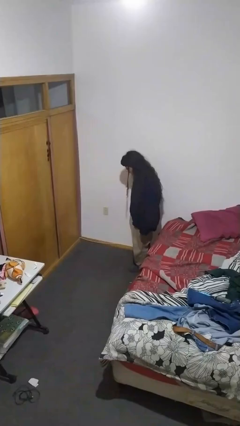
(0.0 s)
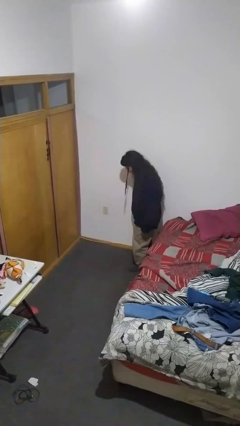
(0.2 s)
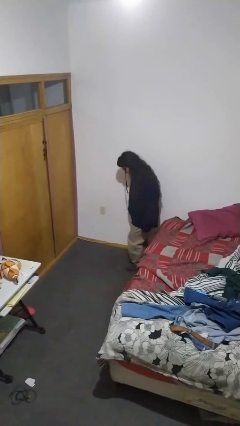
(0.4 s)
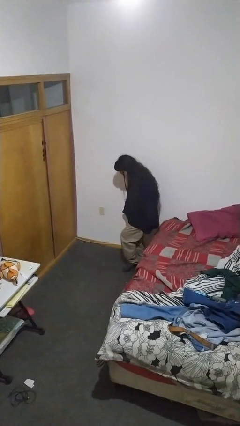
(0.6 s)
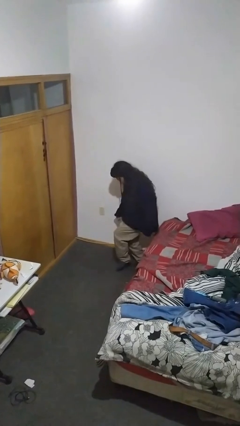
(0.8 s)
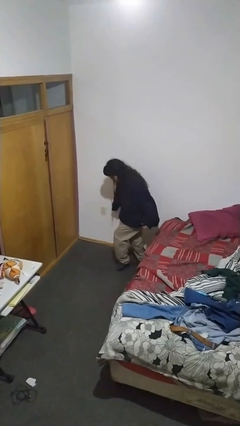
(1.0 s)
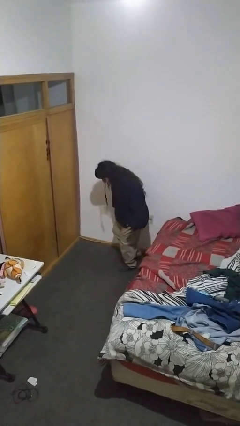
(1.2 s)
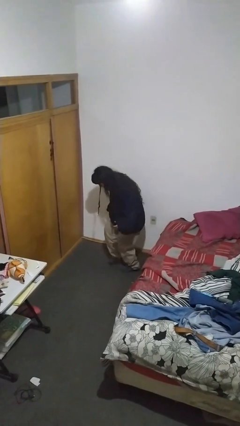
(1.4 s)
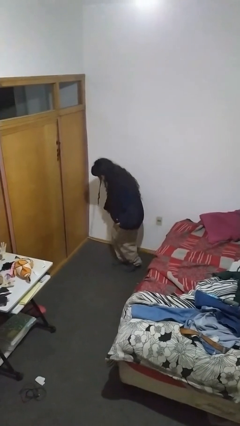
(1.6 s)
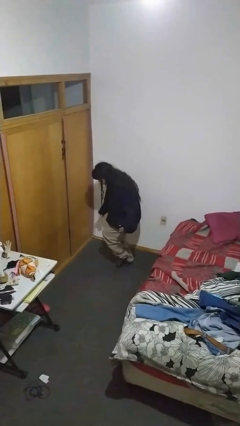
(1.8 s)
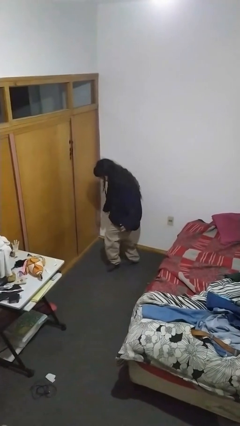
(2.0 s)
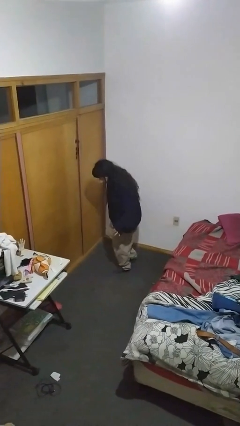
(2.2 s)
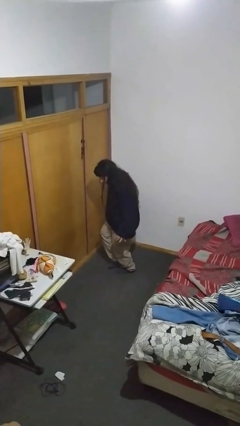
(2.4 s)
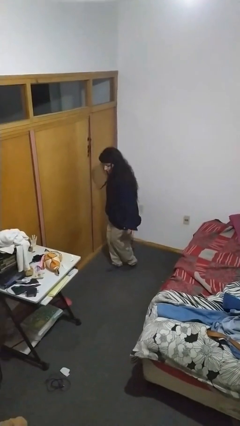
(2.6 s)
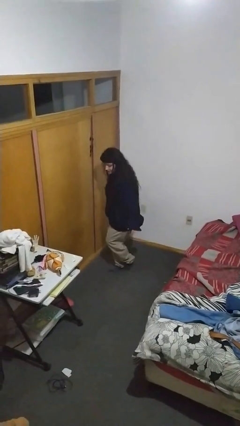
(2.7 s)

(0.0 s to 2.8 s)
person walks tiptoe

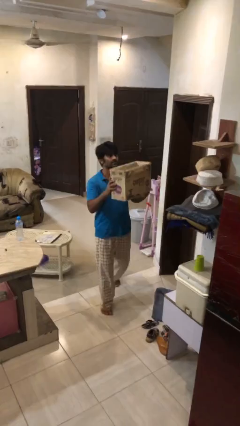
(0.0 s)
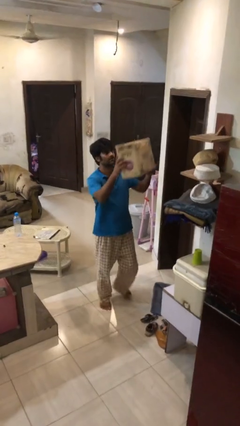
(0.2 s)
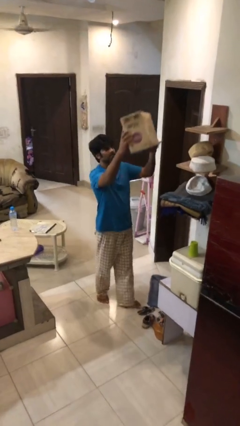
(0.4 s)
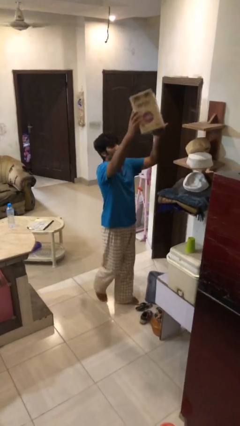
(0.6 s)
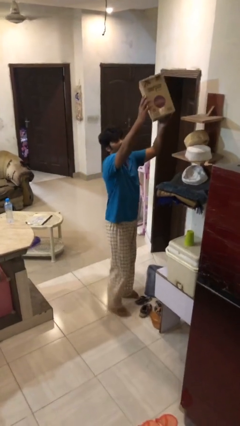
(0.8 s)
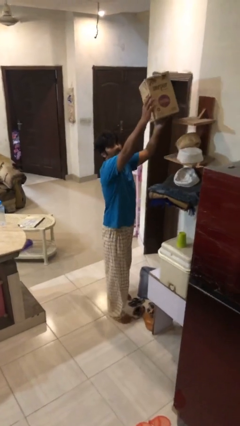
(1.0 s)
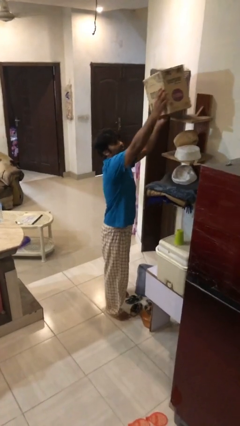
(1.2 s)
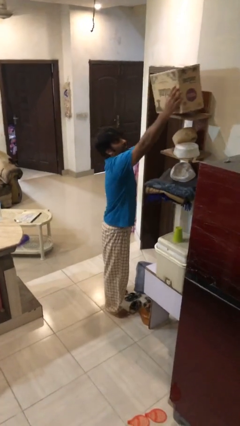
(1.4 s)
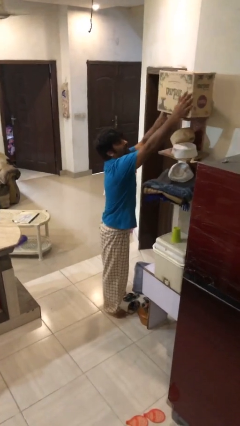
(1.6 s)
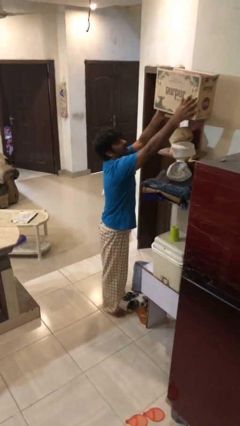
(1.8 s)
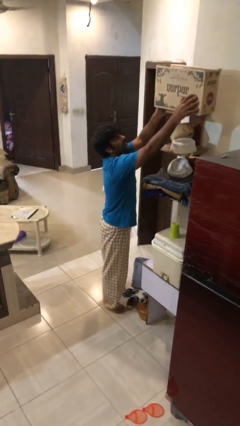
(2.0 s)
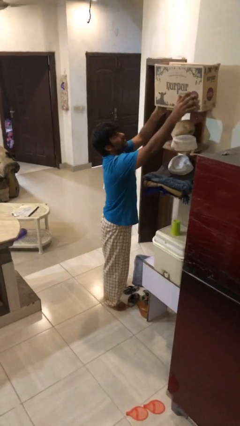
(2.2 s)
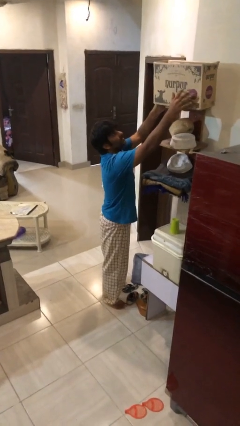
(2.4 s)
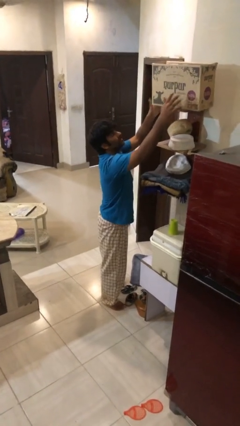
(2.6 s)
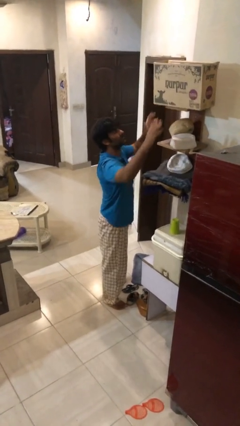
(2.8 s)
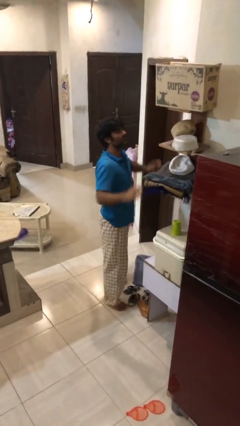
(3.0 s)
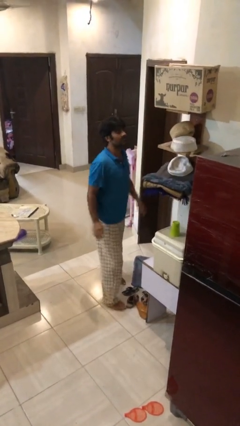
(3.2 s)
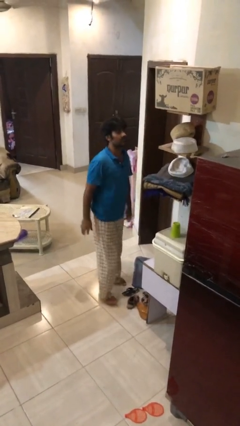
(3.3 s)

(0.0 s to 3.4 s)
person puts down object on shelf

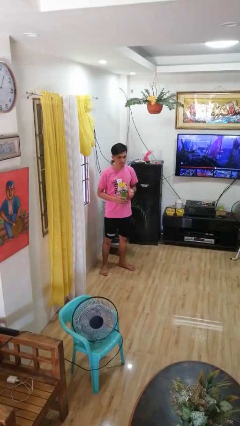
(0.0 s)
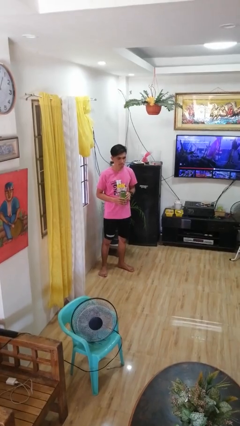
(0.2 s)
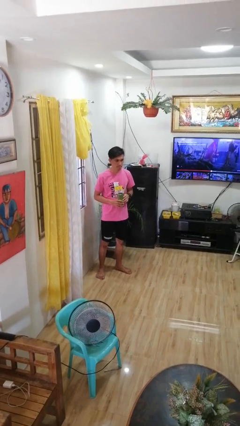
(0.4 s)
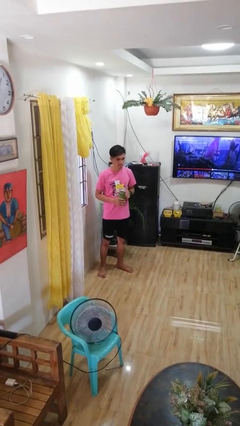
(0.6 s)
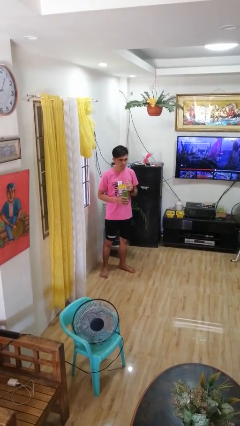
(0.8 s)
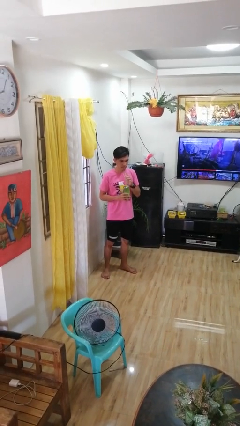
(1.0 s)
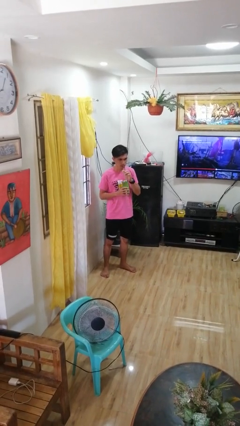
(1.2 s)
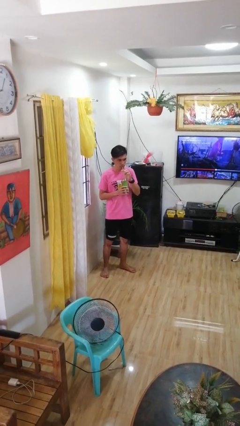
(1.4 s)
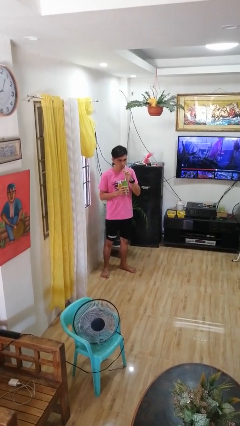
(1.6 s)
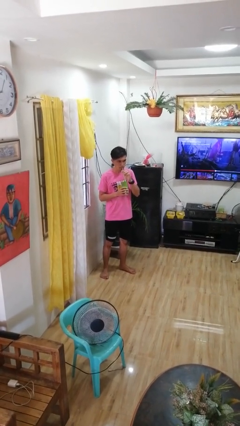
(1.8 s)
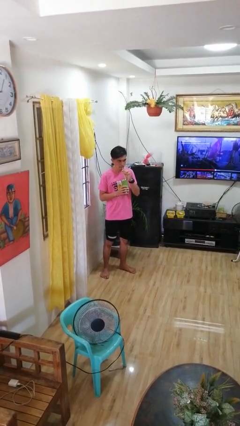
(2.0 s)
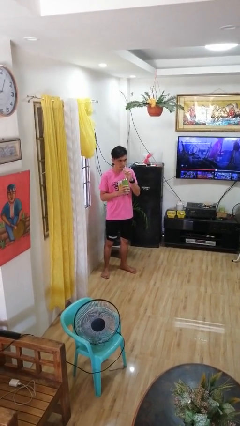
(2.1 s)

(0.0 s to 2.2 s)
person drinks from straw

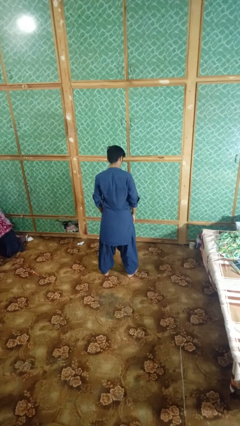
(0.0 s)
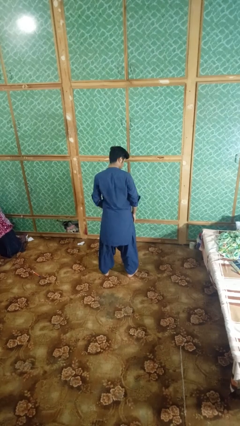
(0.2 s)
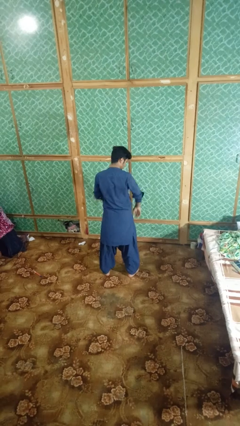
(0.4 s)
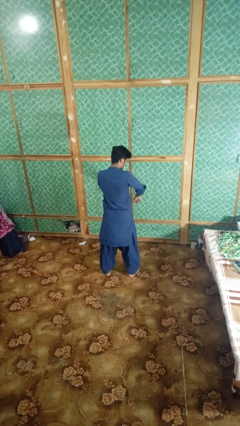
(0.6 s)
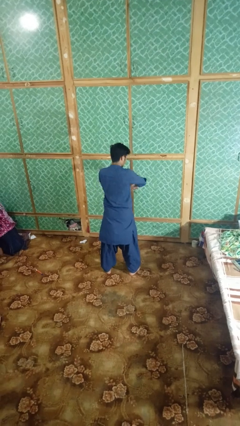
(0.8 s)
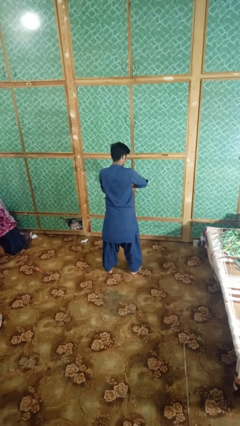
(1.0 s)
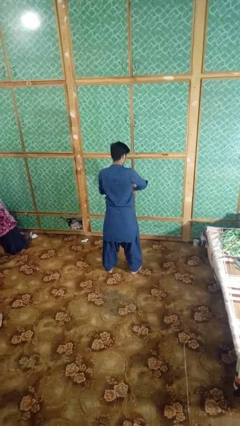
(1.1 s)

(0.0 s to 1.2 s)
person swats bug

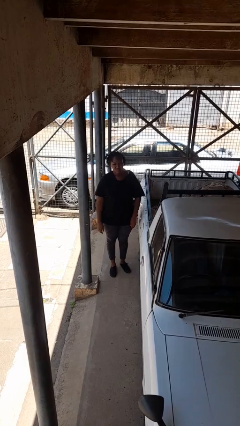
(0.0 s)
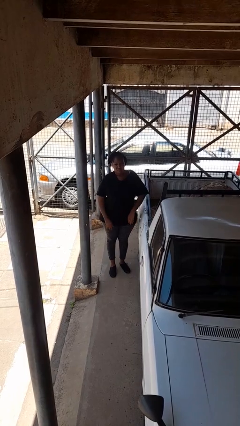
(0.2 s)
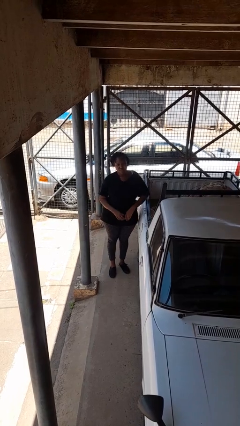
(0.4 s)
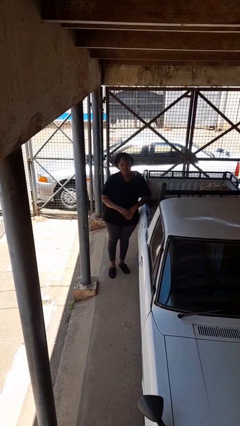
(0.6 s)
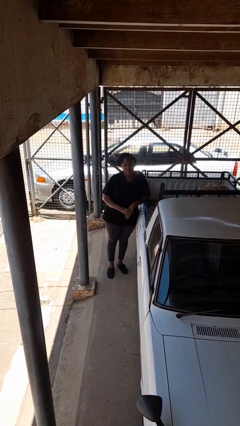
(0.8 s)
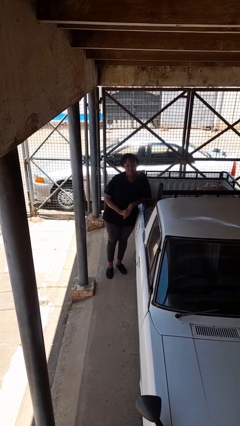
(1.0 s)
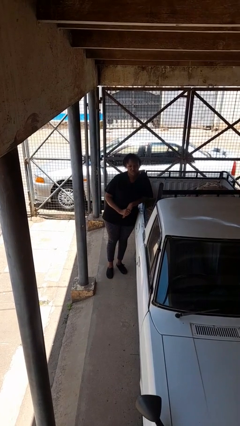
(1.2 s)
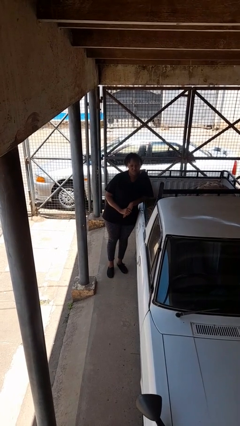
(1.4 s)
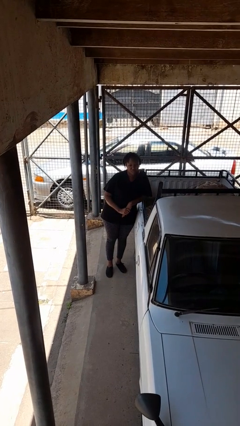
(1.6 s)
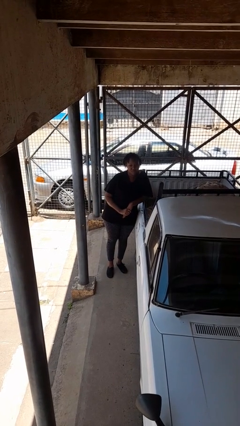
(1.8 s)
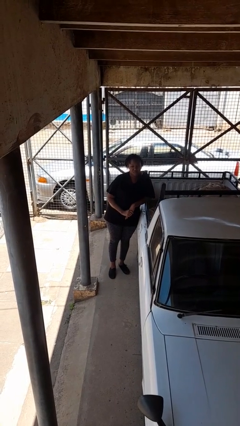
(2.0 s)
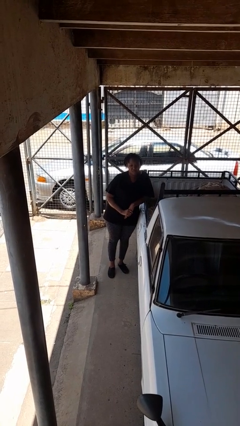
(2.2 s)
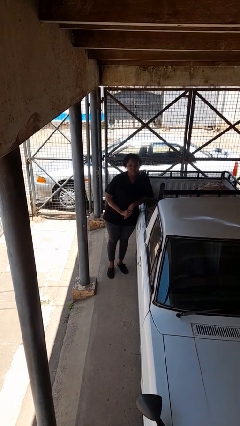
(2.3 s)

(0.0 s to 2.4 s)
person leans against car

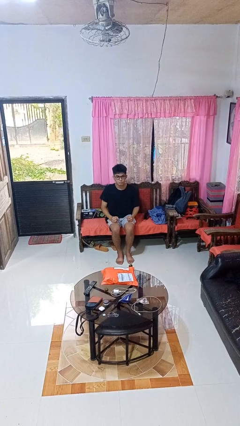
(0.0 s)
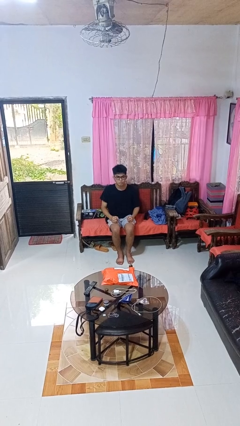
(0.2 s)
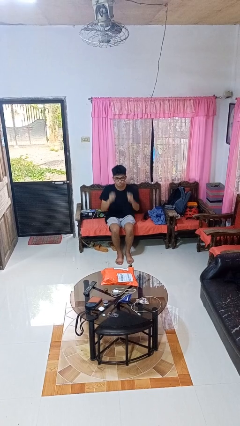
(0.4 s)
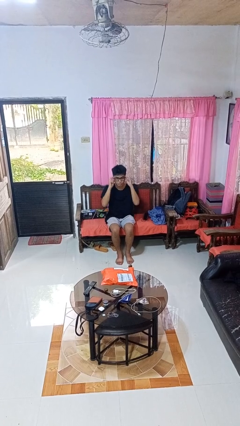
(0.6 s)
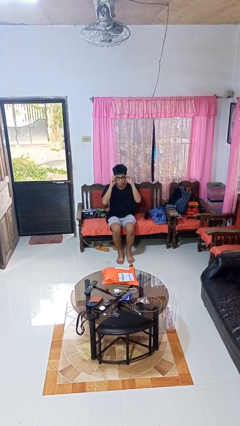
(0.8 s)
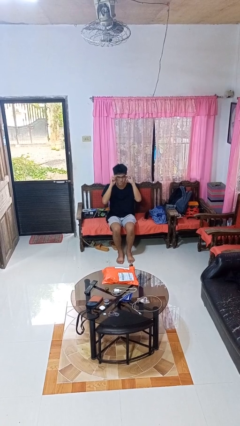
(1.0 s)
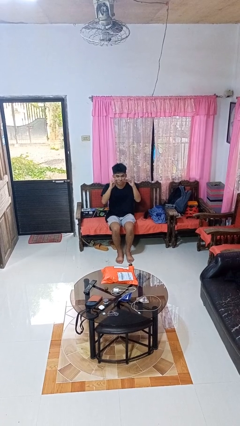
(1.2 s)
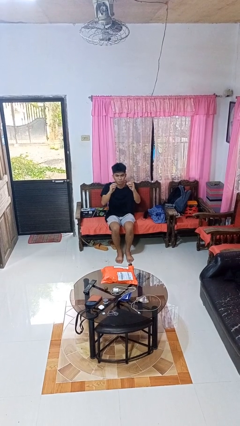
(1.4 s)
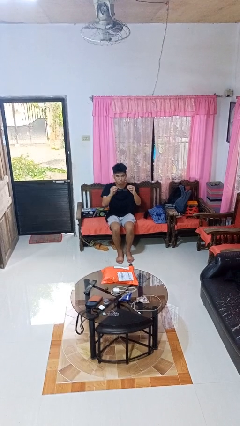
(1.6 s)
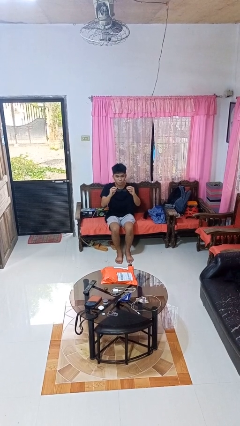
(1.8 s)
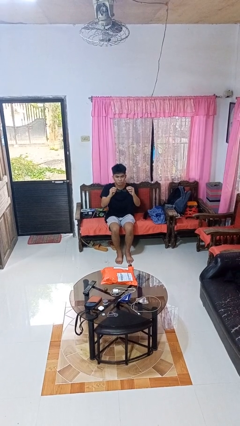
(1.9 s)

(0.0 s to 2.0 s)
person takes off glasses

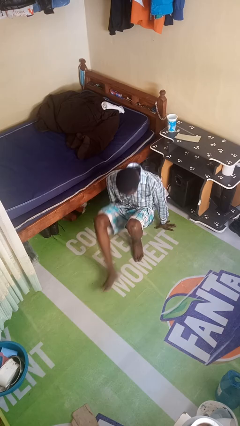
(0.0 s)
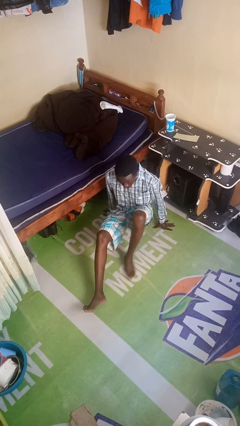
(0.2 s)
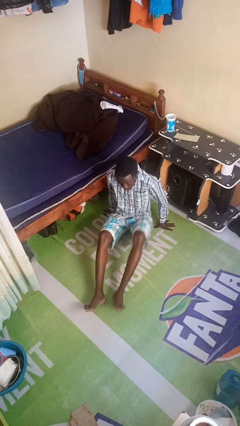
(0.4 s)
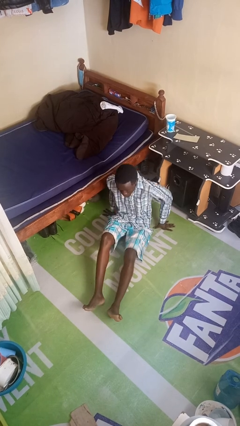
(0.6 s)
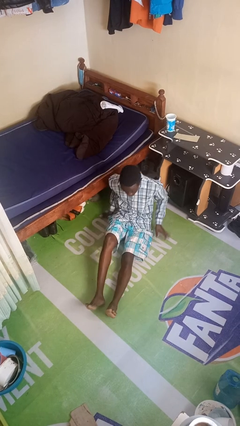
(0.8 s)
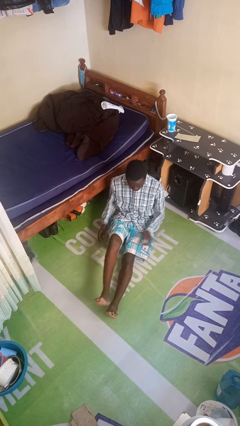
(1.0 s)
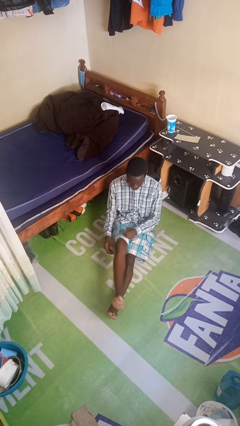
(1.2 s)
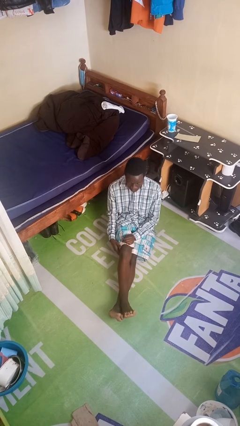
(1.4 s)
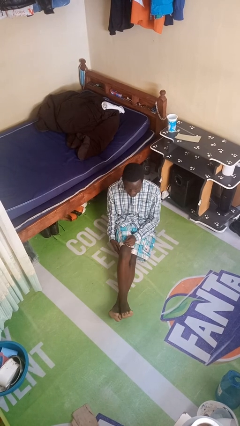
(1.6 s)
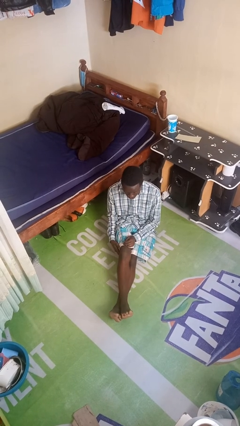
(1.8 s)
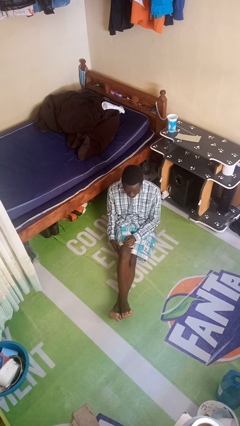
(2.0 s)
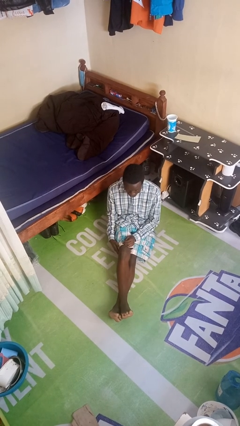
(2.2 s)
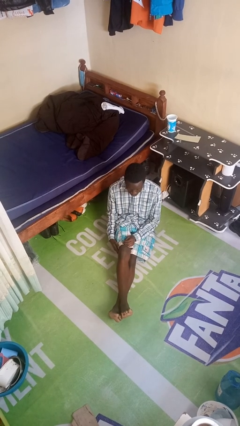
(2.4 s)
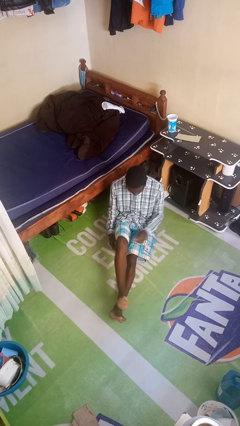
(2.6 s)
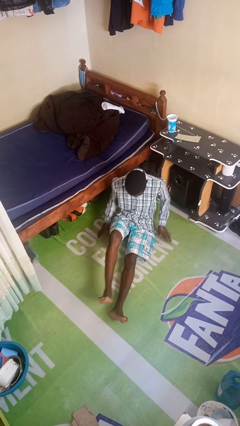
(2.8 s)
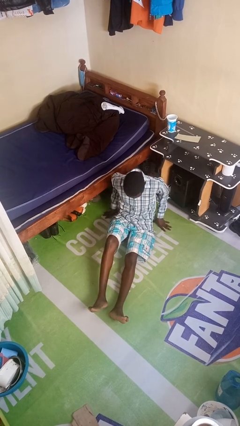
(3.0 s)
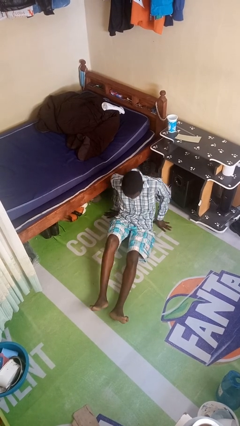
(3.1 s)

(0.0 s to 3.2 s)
person sits crisscross
